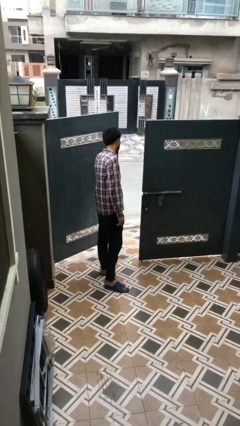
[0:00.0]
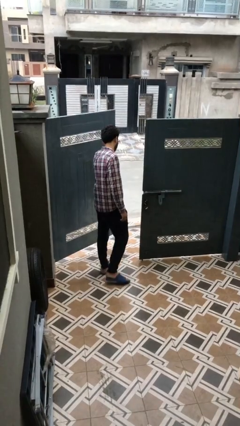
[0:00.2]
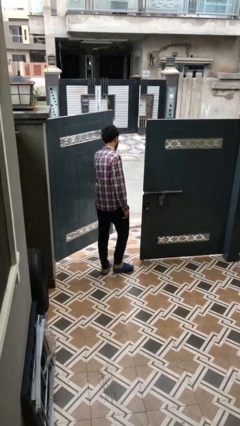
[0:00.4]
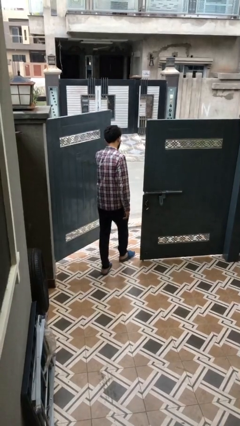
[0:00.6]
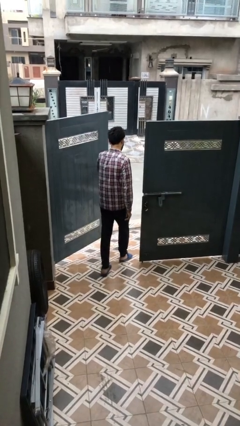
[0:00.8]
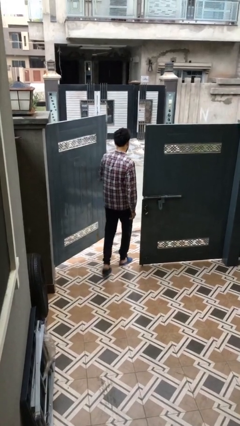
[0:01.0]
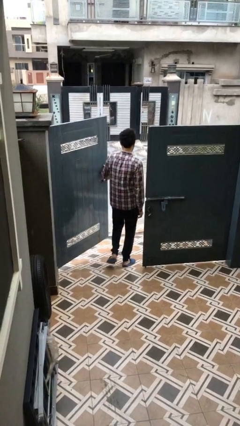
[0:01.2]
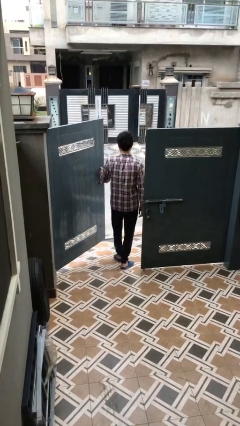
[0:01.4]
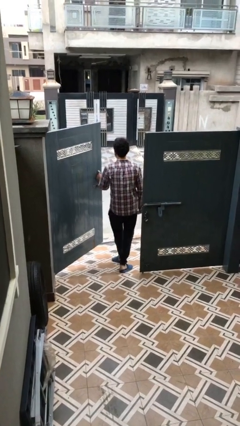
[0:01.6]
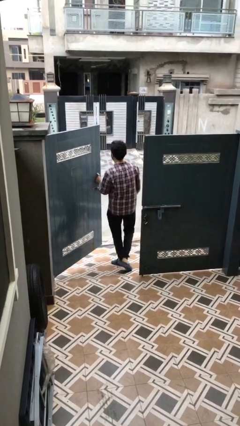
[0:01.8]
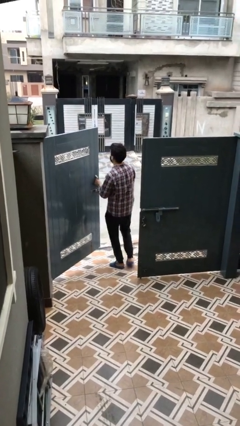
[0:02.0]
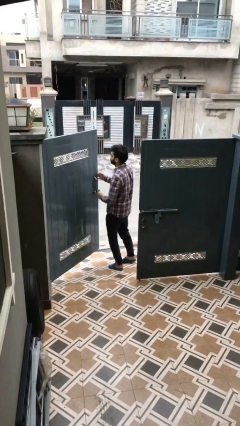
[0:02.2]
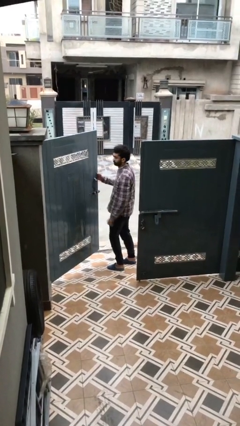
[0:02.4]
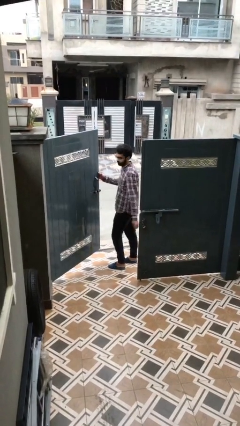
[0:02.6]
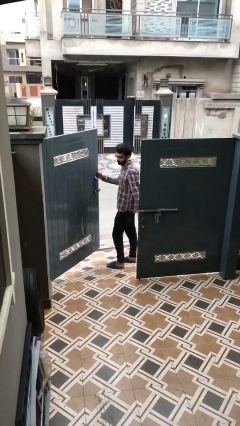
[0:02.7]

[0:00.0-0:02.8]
person exits scene through structure

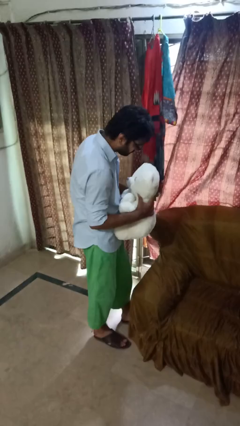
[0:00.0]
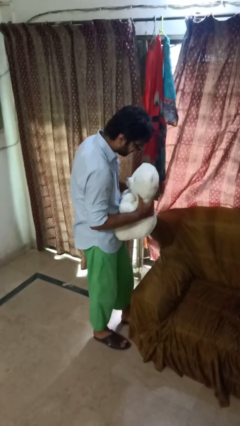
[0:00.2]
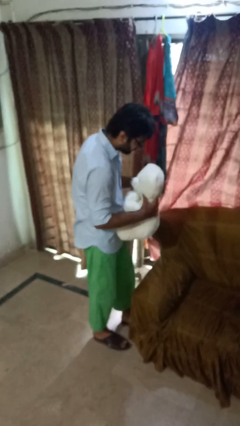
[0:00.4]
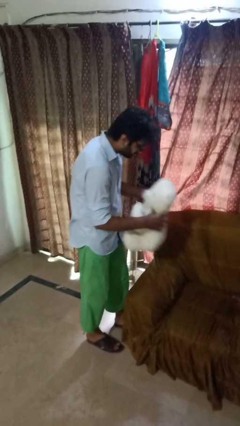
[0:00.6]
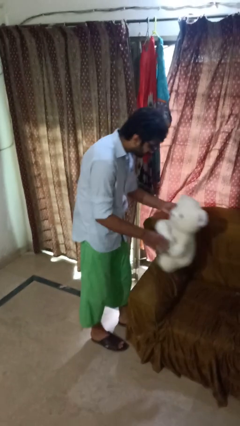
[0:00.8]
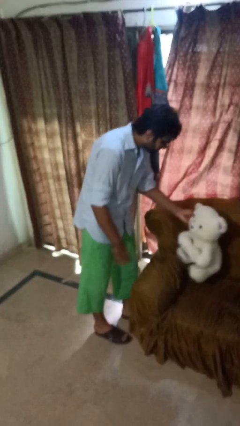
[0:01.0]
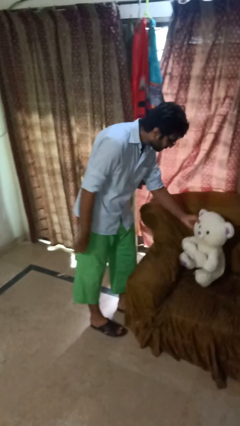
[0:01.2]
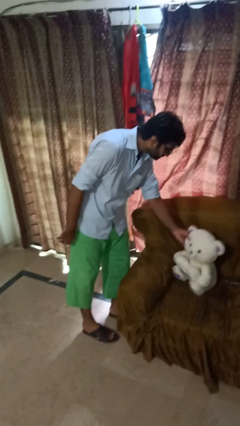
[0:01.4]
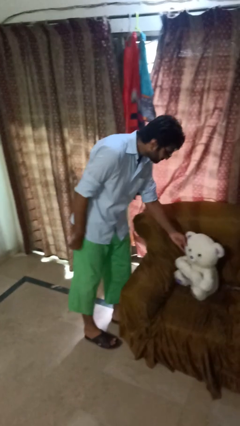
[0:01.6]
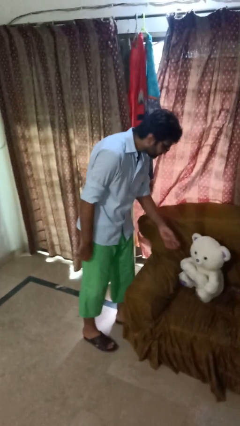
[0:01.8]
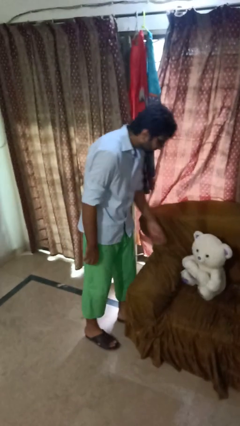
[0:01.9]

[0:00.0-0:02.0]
person puts down object on couch

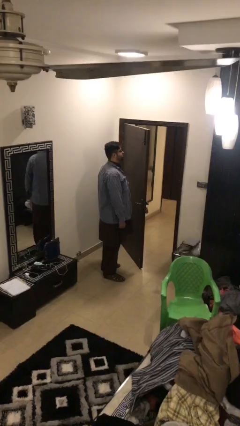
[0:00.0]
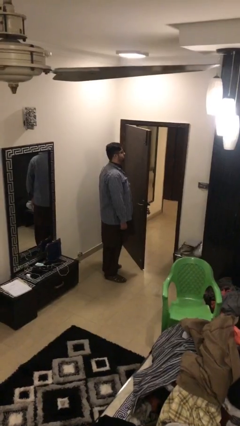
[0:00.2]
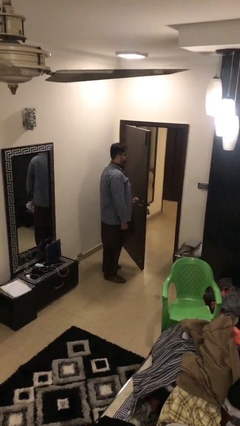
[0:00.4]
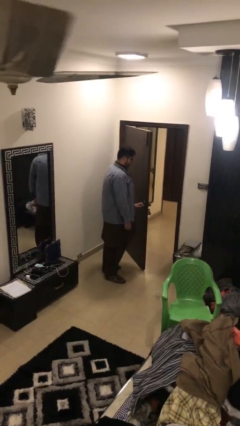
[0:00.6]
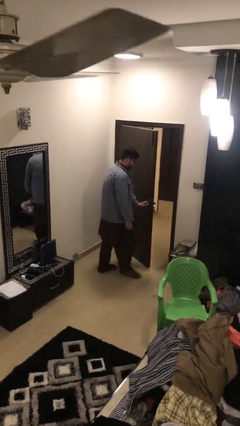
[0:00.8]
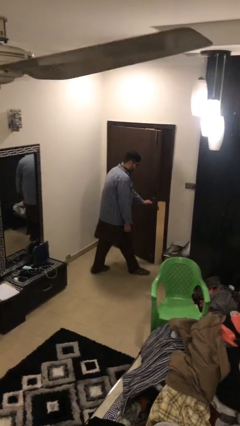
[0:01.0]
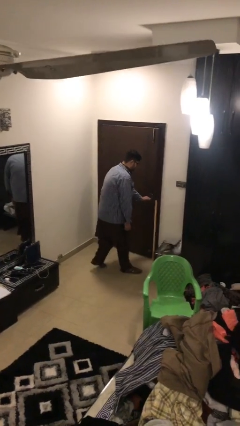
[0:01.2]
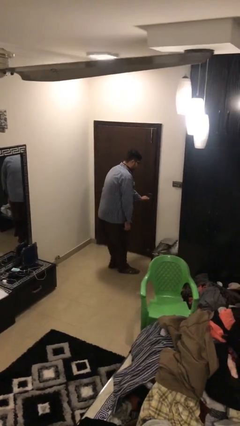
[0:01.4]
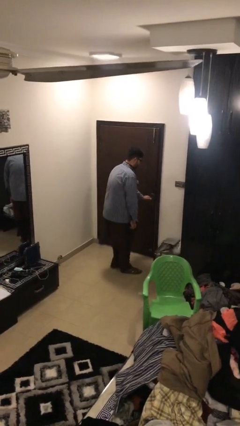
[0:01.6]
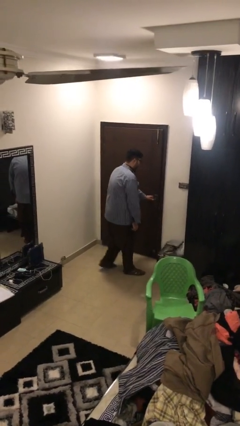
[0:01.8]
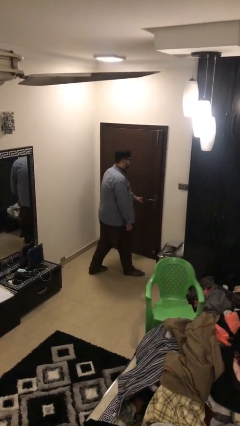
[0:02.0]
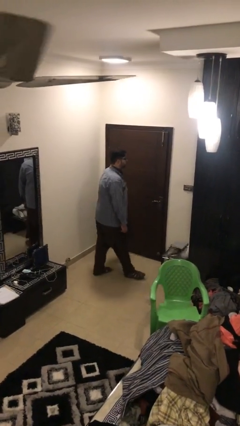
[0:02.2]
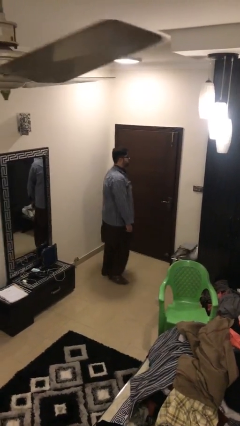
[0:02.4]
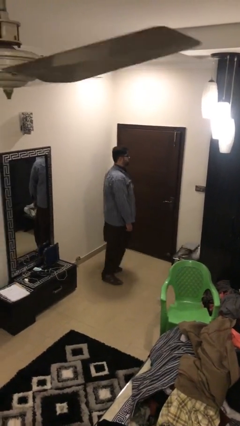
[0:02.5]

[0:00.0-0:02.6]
person closes facility door

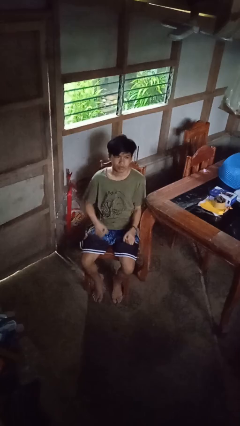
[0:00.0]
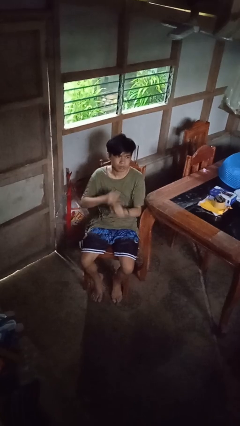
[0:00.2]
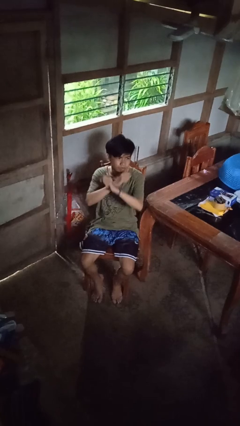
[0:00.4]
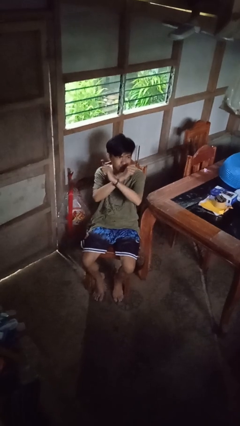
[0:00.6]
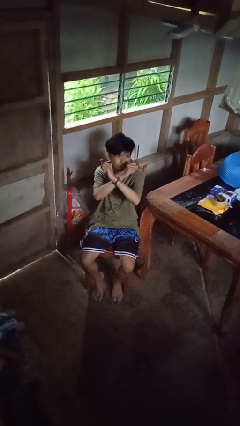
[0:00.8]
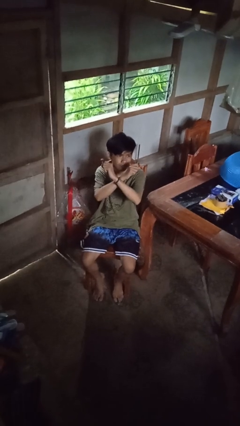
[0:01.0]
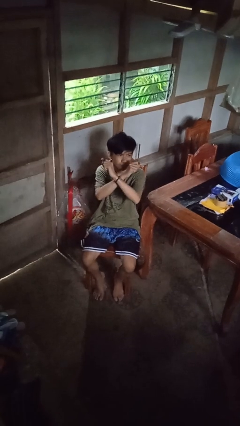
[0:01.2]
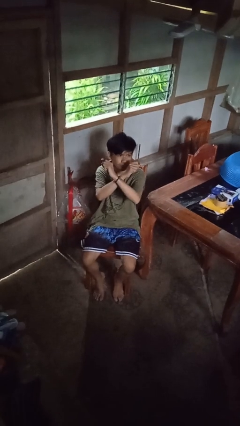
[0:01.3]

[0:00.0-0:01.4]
person gestures arms x

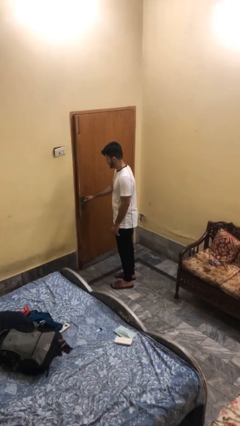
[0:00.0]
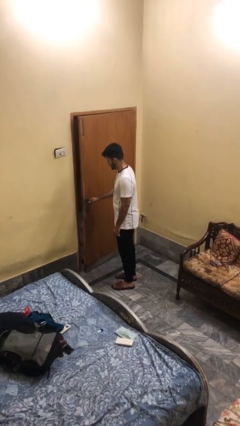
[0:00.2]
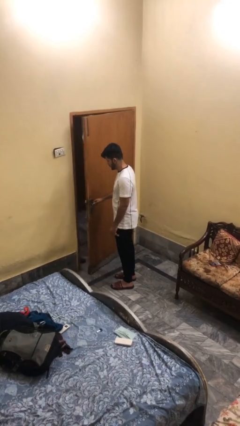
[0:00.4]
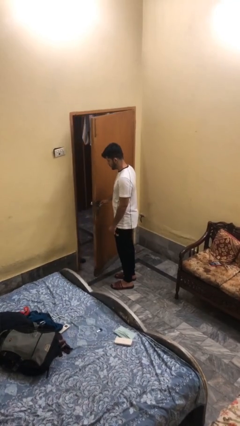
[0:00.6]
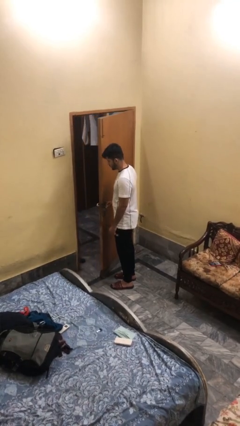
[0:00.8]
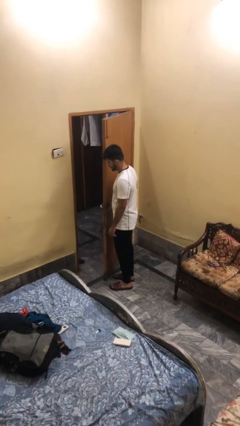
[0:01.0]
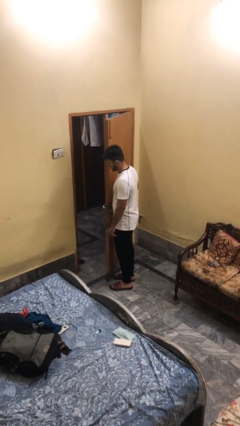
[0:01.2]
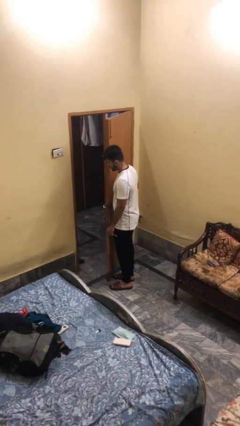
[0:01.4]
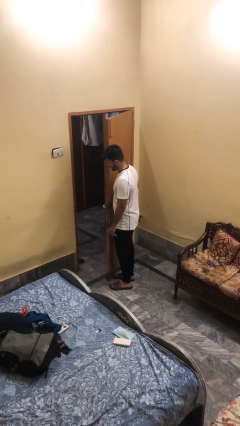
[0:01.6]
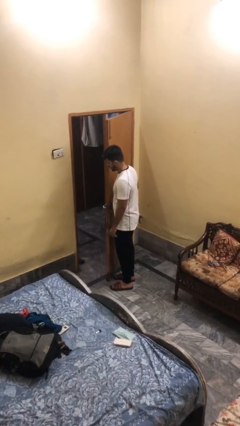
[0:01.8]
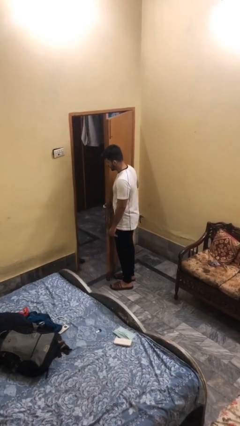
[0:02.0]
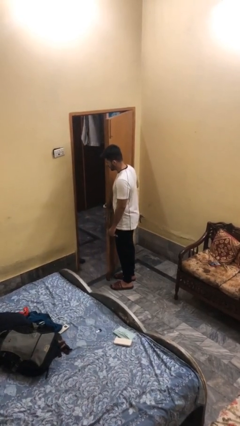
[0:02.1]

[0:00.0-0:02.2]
person opens facility door

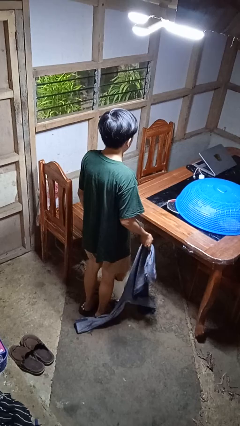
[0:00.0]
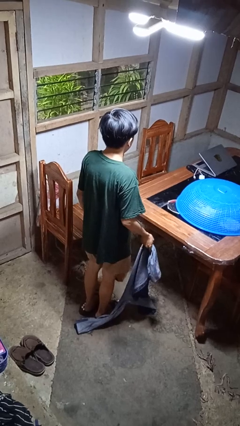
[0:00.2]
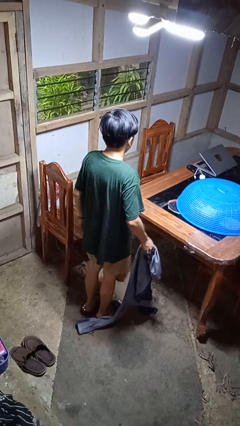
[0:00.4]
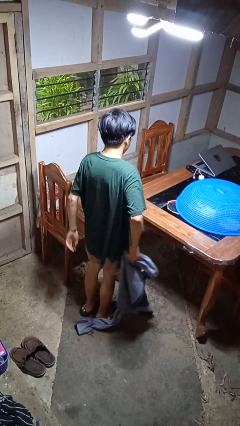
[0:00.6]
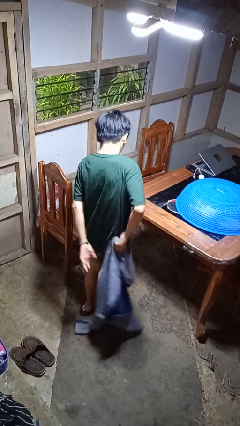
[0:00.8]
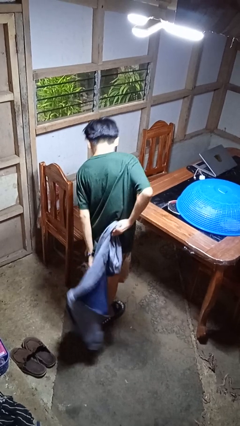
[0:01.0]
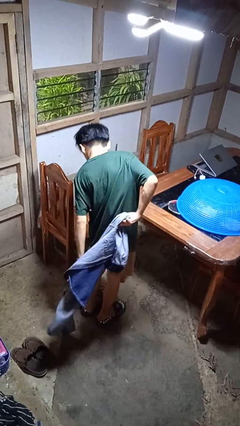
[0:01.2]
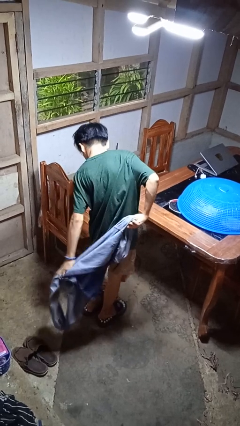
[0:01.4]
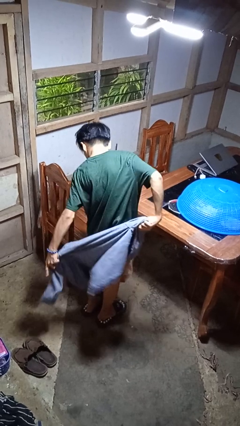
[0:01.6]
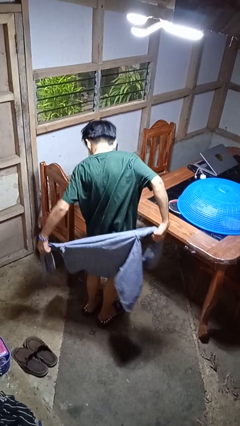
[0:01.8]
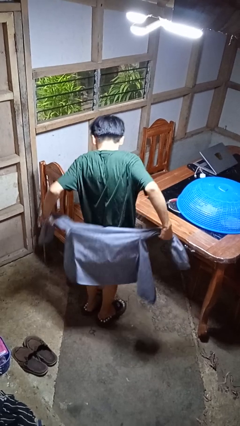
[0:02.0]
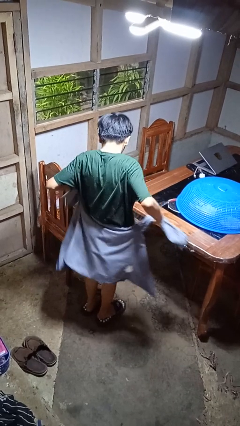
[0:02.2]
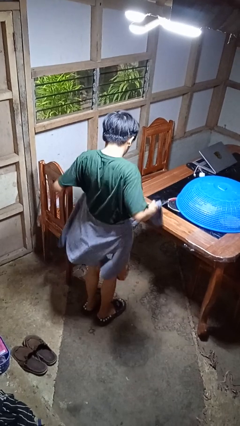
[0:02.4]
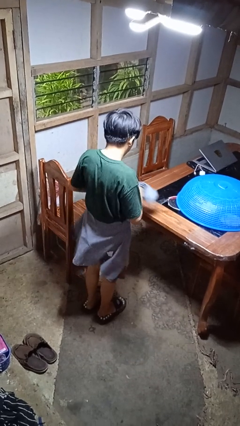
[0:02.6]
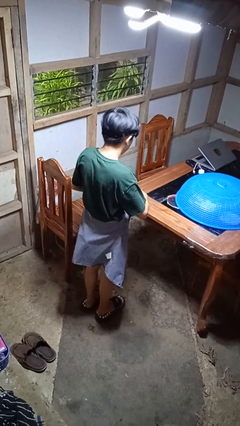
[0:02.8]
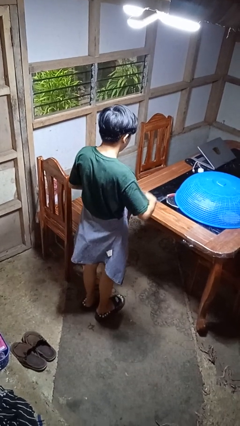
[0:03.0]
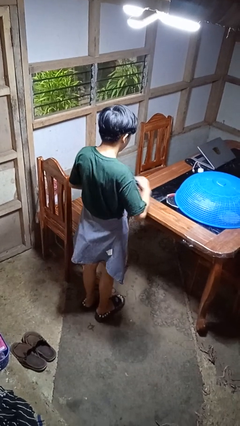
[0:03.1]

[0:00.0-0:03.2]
person ties jacket around waist

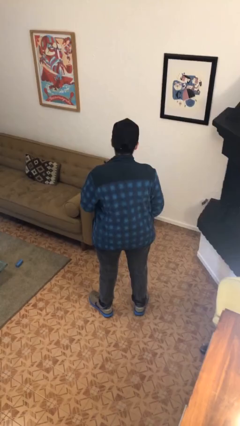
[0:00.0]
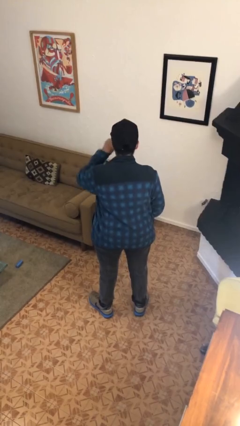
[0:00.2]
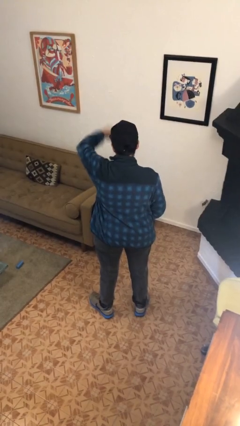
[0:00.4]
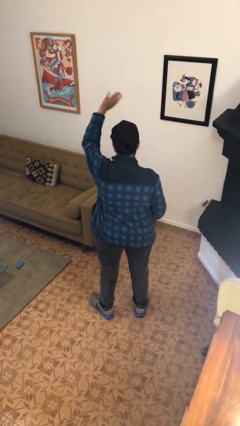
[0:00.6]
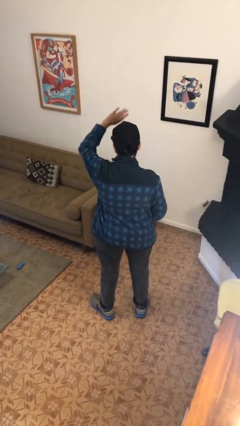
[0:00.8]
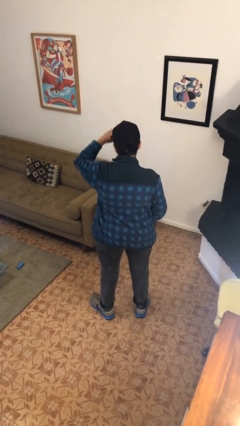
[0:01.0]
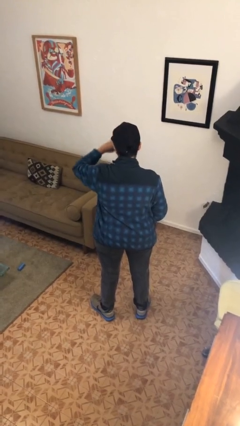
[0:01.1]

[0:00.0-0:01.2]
person gestures swipe up

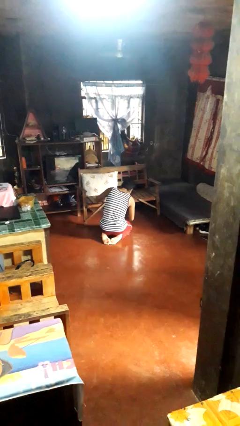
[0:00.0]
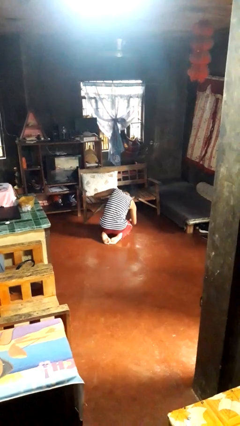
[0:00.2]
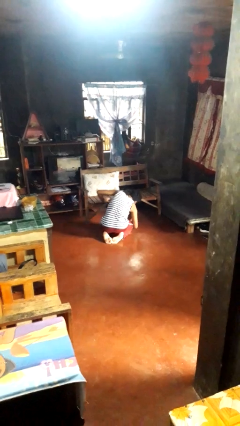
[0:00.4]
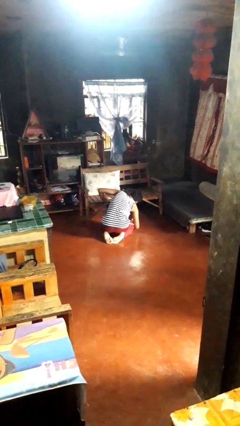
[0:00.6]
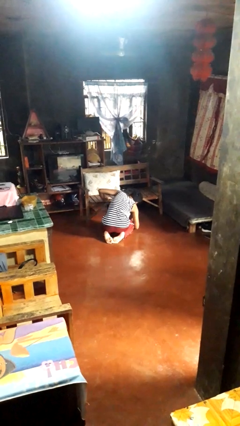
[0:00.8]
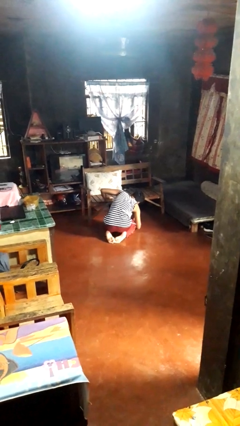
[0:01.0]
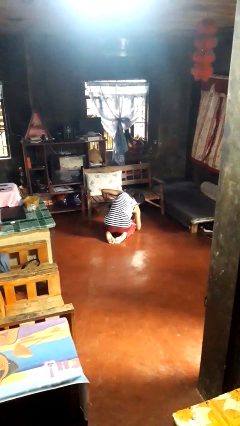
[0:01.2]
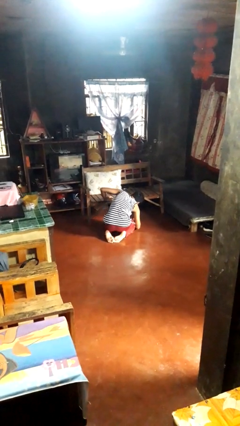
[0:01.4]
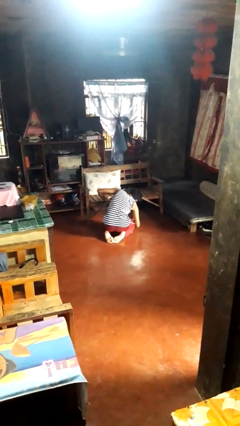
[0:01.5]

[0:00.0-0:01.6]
person searches under couch
